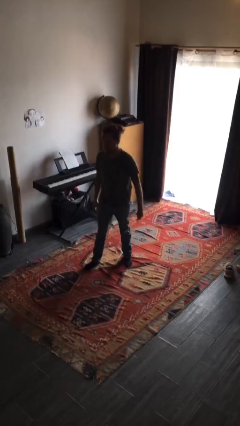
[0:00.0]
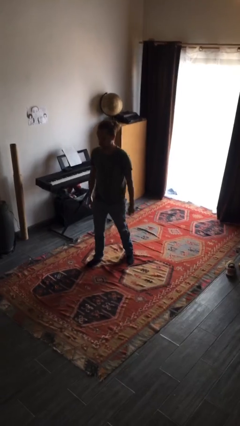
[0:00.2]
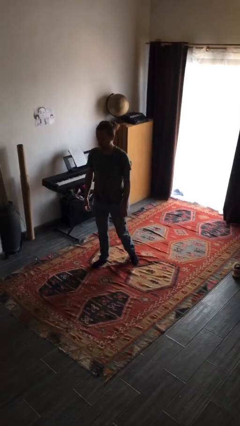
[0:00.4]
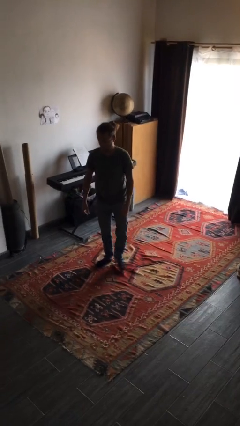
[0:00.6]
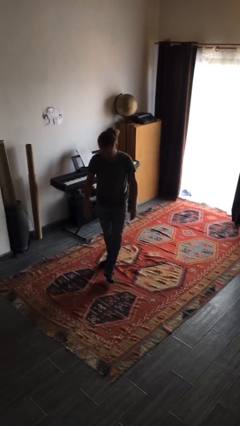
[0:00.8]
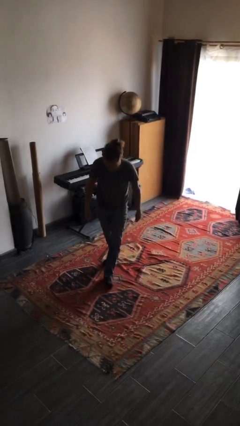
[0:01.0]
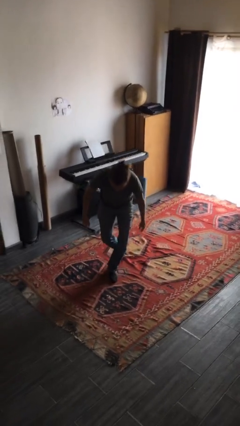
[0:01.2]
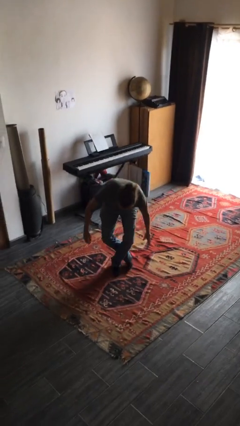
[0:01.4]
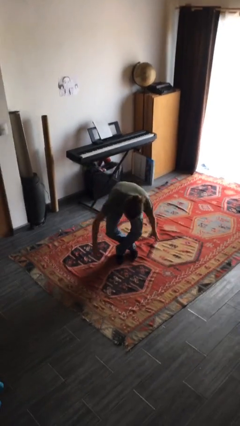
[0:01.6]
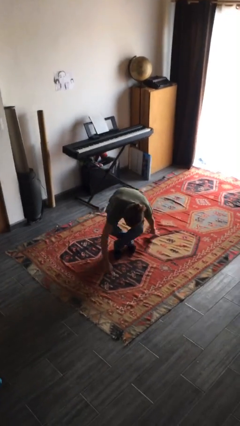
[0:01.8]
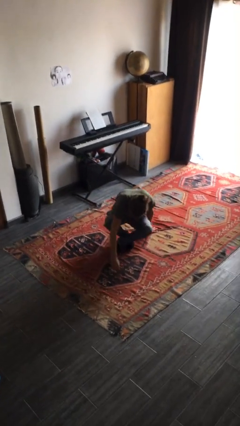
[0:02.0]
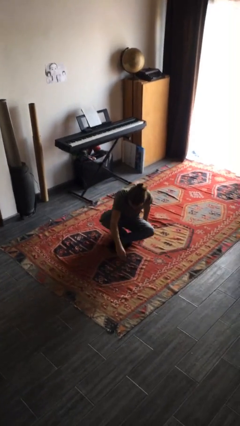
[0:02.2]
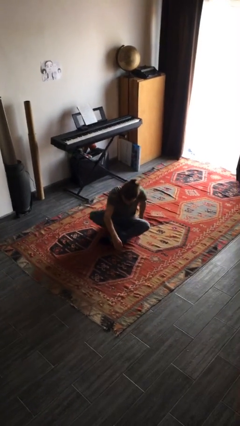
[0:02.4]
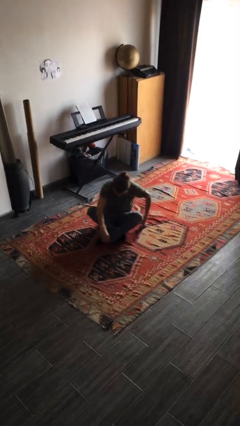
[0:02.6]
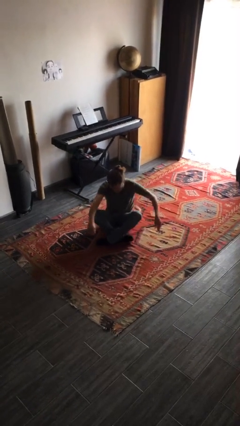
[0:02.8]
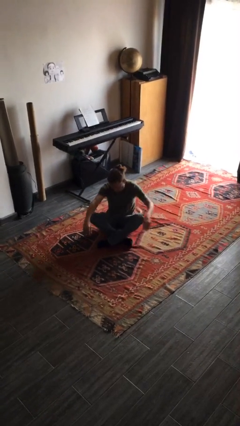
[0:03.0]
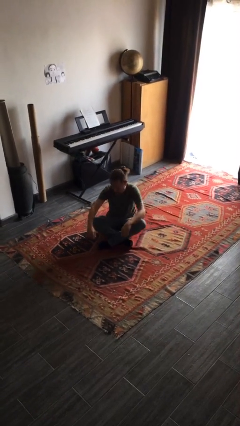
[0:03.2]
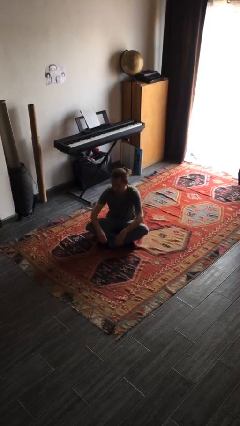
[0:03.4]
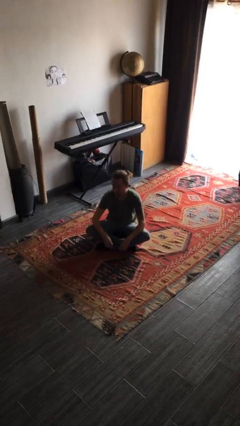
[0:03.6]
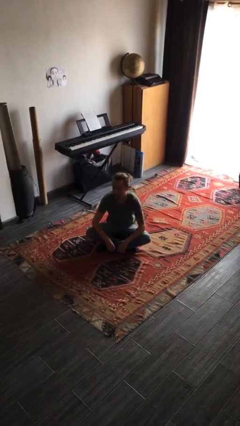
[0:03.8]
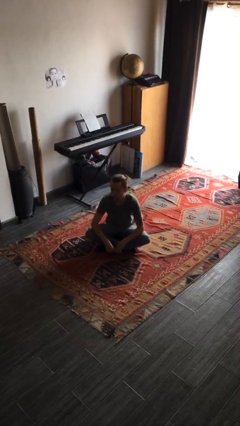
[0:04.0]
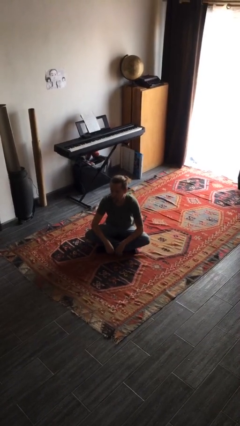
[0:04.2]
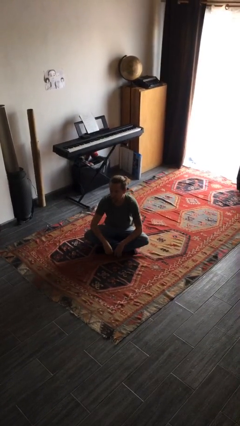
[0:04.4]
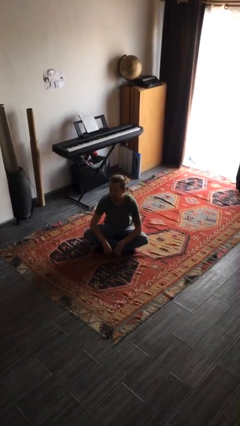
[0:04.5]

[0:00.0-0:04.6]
person sits crisscross

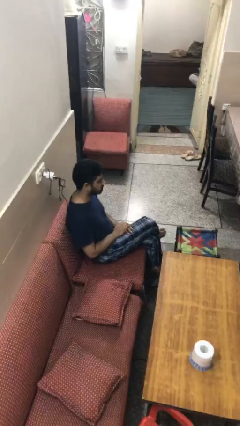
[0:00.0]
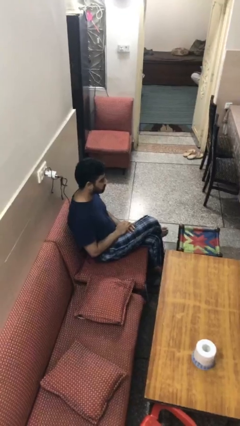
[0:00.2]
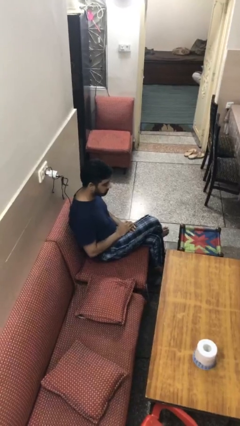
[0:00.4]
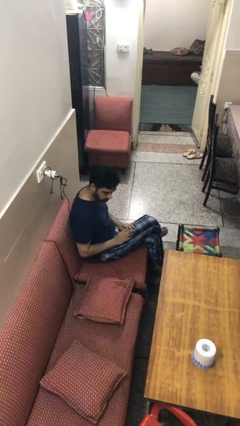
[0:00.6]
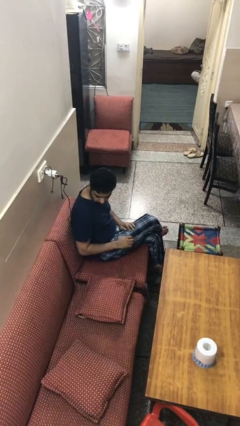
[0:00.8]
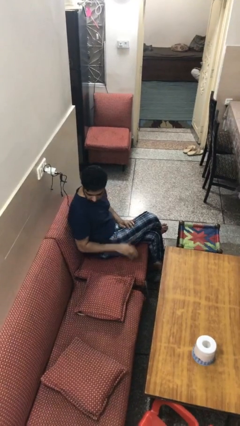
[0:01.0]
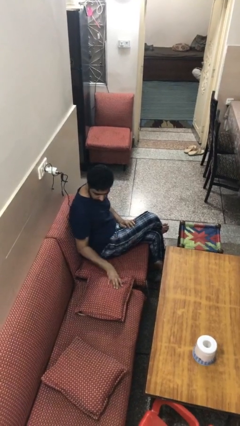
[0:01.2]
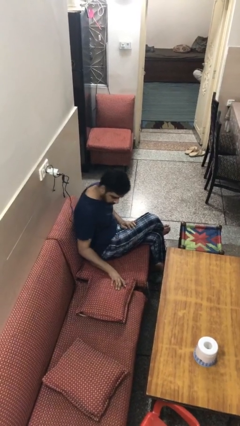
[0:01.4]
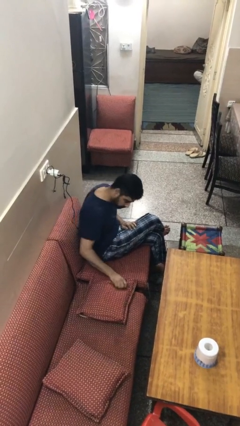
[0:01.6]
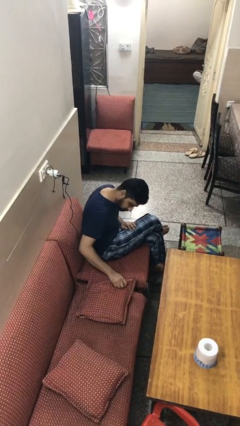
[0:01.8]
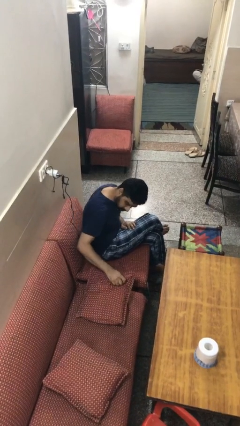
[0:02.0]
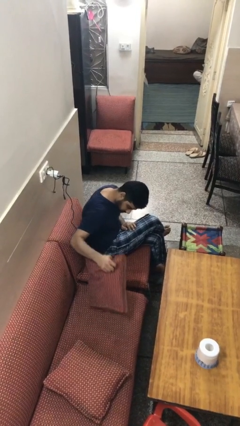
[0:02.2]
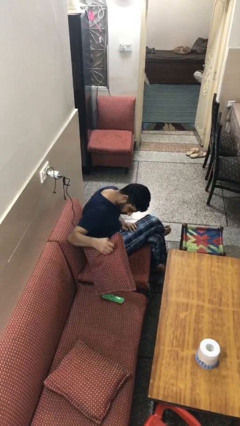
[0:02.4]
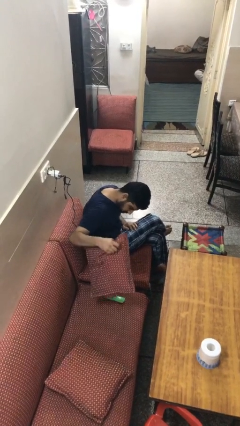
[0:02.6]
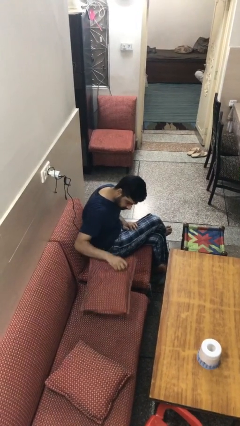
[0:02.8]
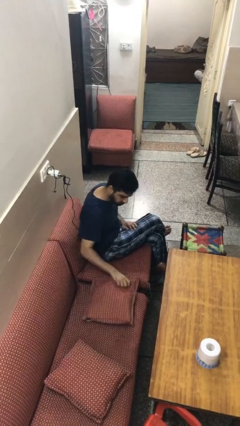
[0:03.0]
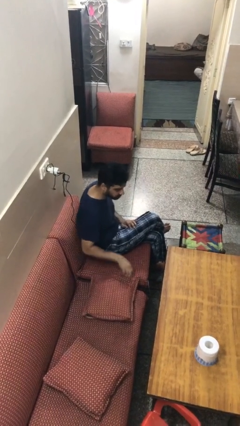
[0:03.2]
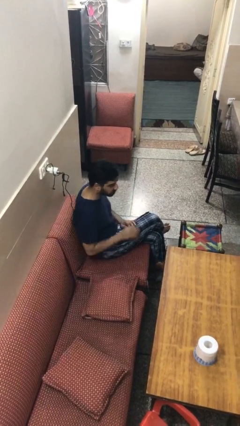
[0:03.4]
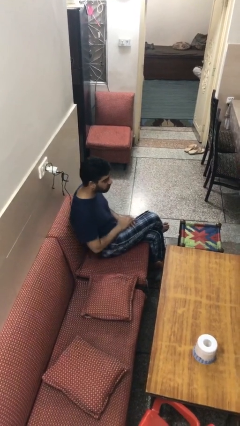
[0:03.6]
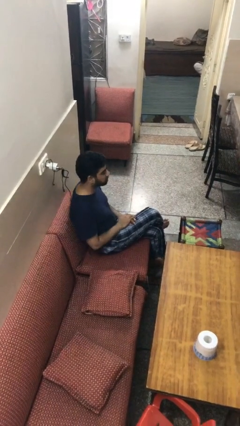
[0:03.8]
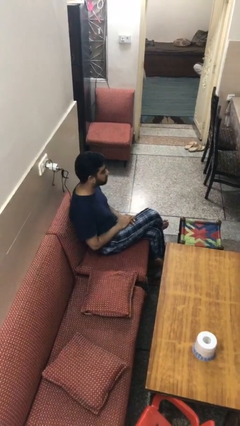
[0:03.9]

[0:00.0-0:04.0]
person searches in couch

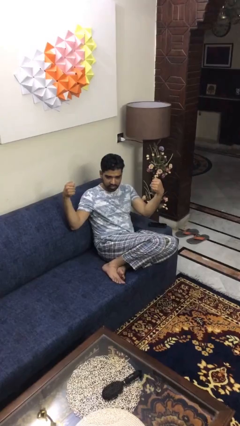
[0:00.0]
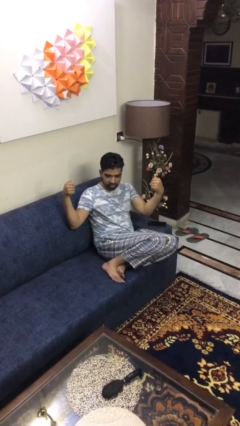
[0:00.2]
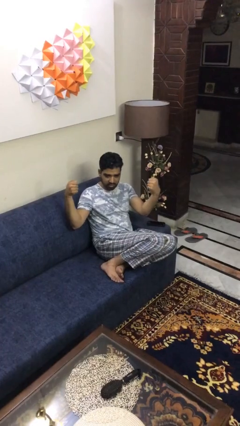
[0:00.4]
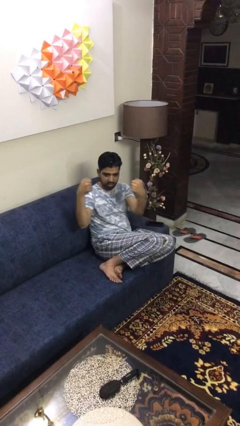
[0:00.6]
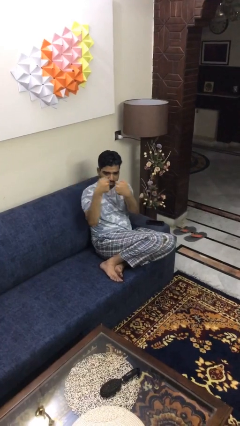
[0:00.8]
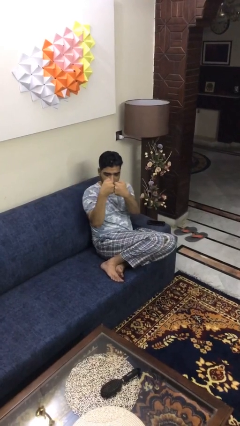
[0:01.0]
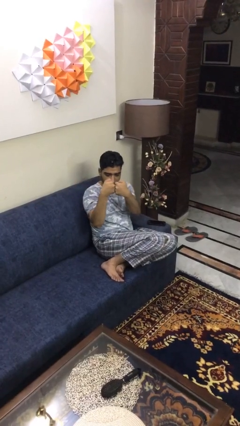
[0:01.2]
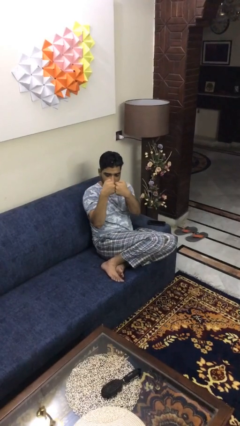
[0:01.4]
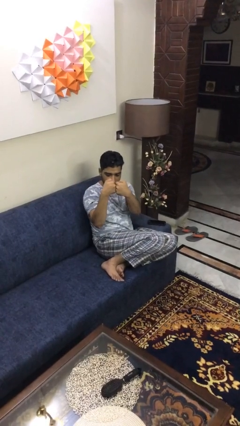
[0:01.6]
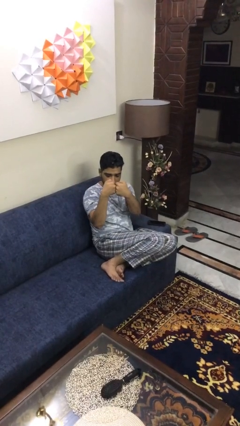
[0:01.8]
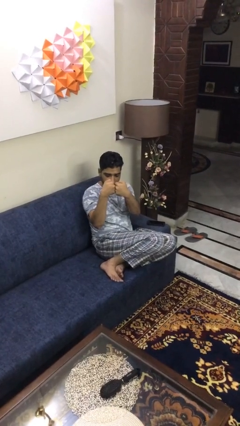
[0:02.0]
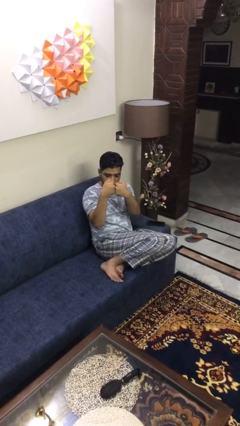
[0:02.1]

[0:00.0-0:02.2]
person gestures zoom out

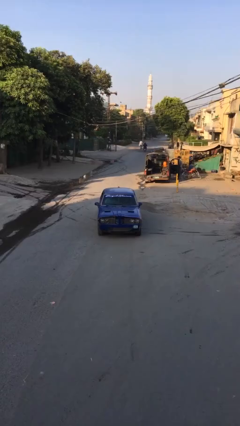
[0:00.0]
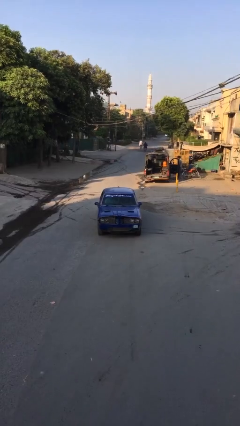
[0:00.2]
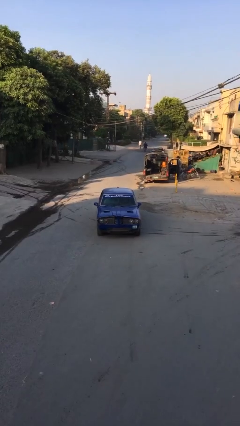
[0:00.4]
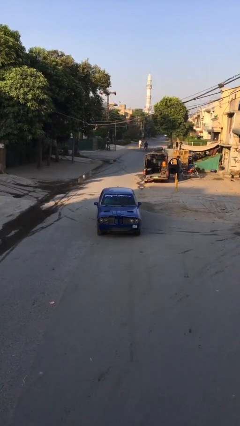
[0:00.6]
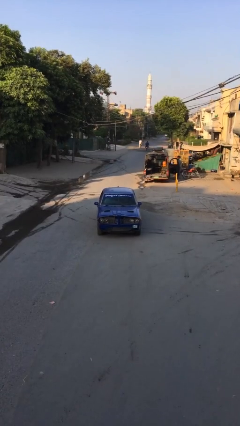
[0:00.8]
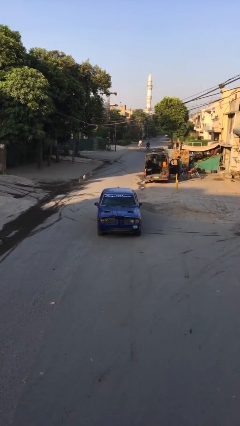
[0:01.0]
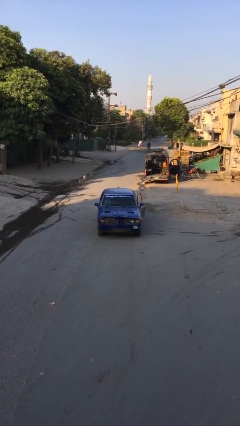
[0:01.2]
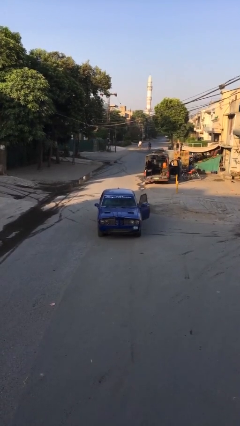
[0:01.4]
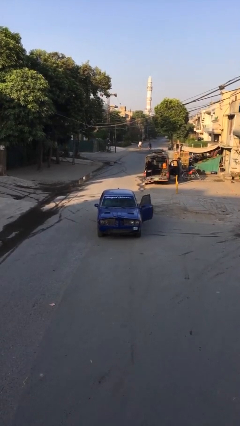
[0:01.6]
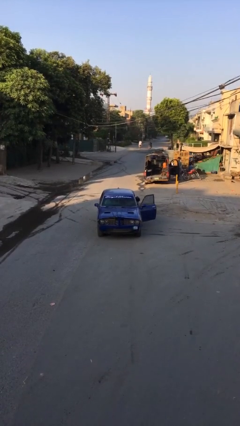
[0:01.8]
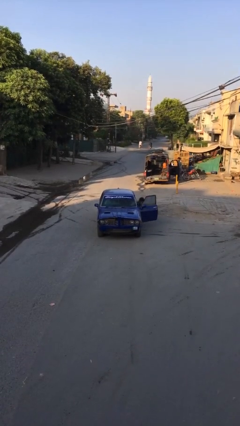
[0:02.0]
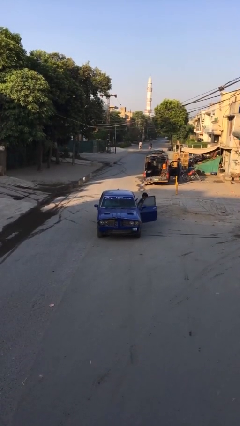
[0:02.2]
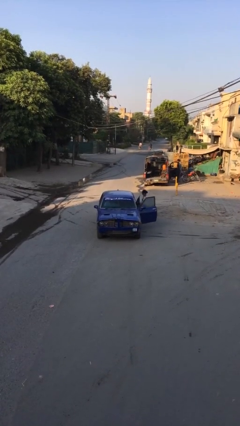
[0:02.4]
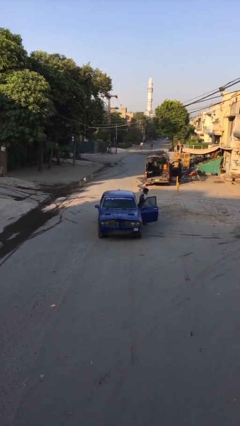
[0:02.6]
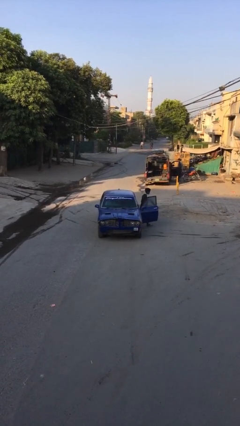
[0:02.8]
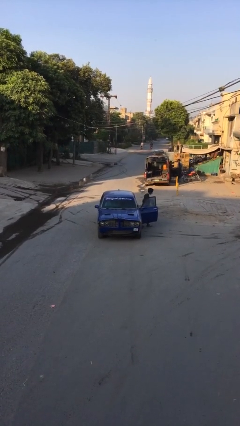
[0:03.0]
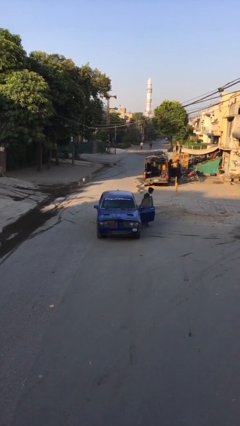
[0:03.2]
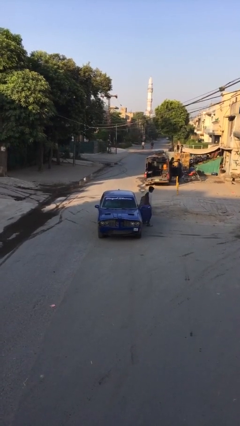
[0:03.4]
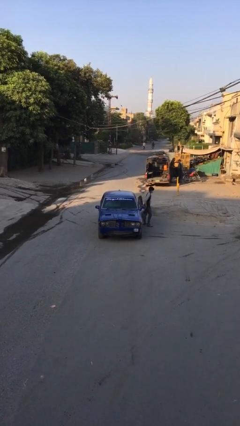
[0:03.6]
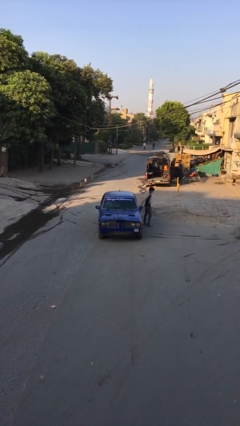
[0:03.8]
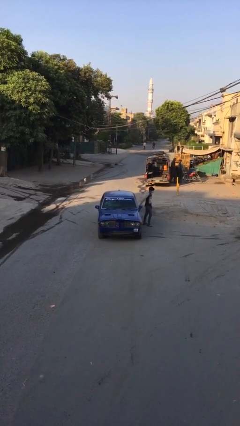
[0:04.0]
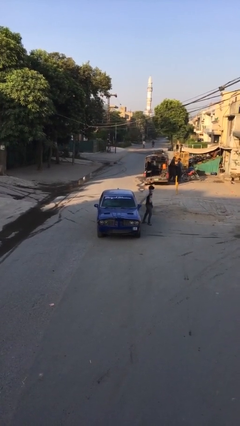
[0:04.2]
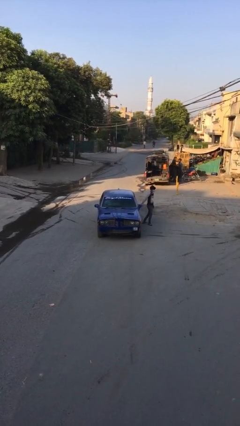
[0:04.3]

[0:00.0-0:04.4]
car drops off person

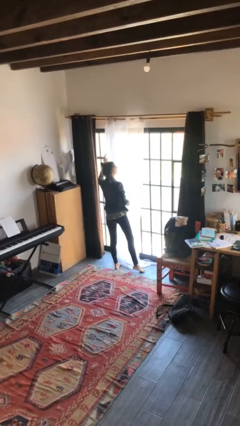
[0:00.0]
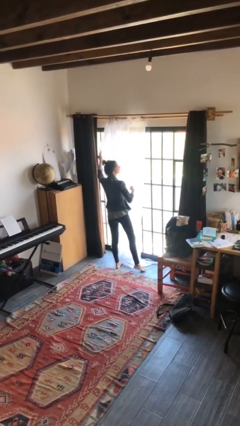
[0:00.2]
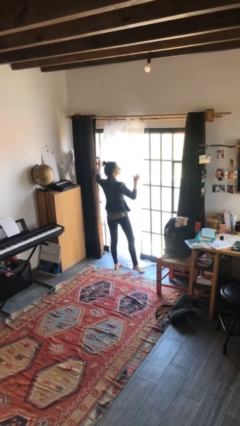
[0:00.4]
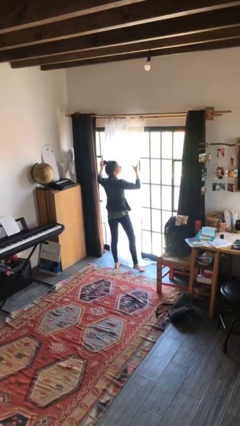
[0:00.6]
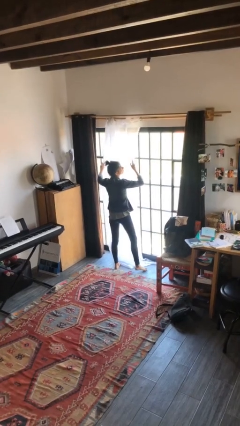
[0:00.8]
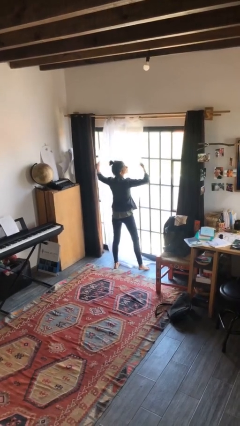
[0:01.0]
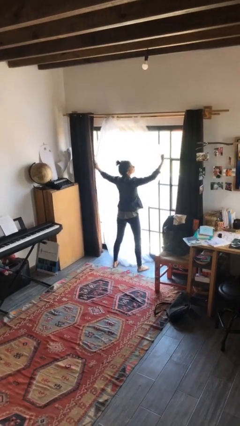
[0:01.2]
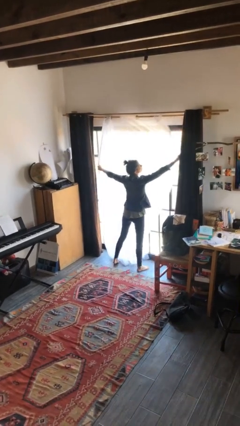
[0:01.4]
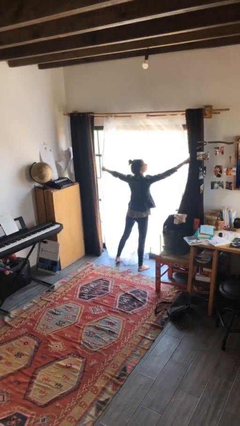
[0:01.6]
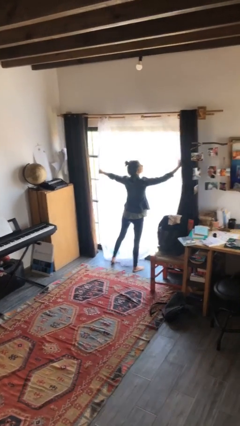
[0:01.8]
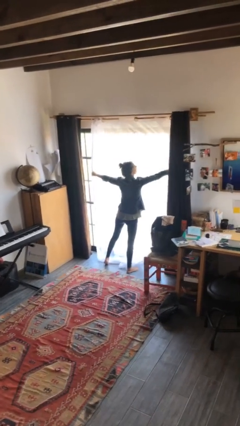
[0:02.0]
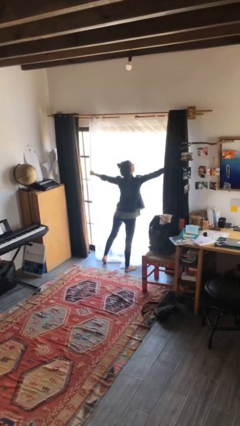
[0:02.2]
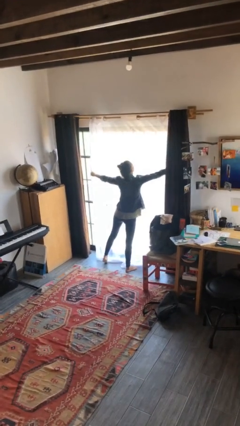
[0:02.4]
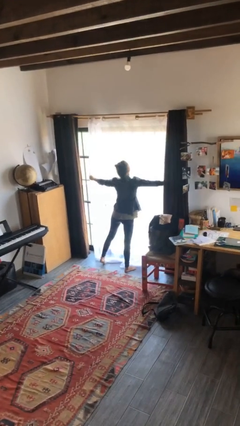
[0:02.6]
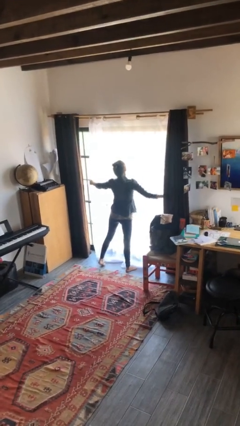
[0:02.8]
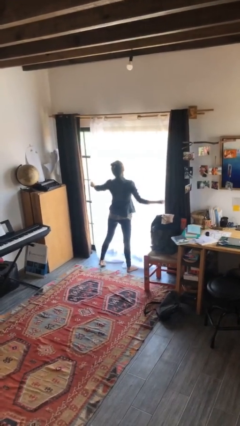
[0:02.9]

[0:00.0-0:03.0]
person closes curtains
